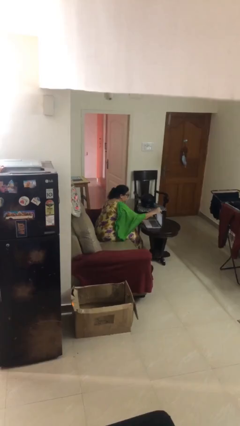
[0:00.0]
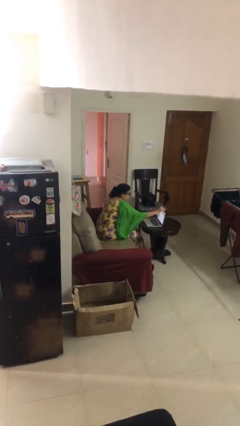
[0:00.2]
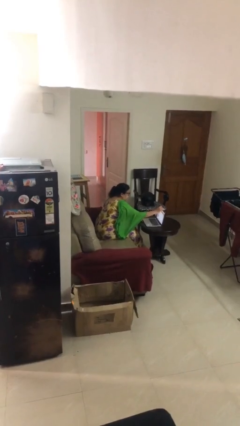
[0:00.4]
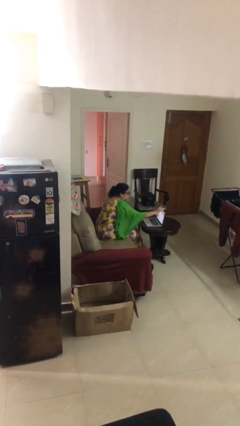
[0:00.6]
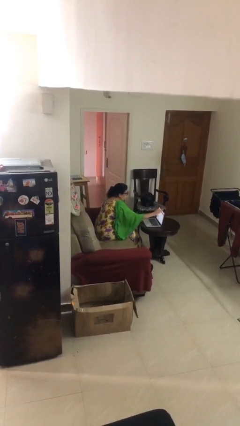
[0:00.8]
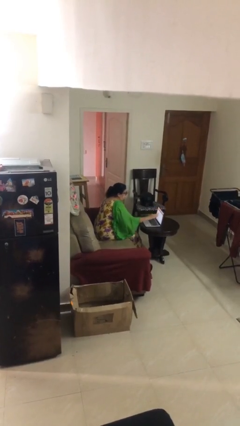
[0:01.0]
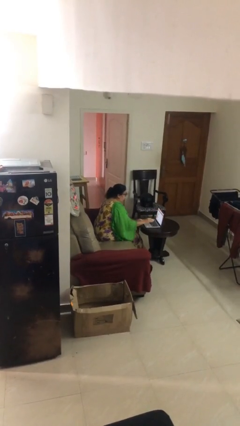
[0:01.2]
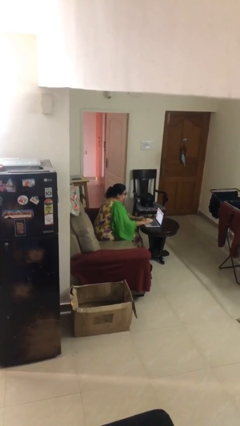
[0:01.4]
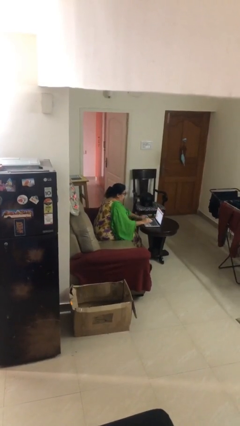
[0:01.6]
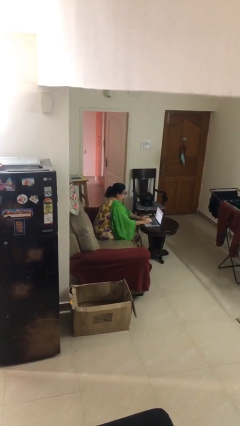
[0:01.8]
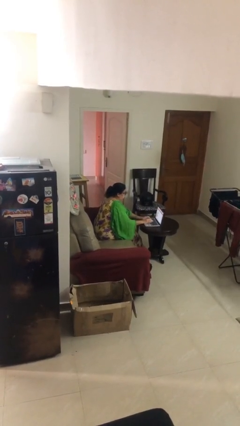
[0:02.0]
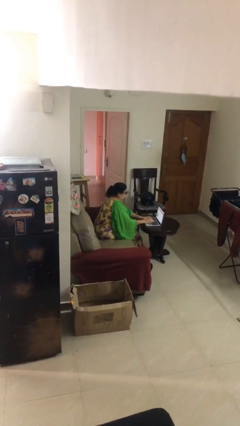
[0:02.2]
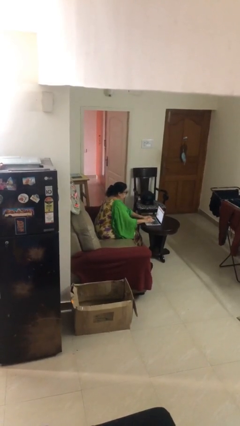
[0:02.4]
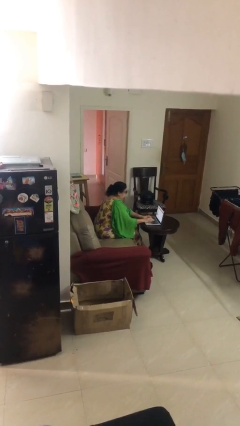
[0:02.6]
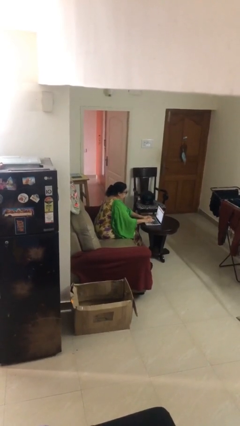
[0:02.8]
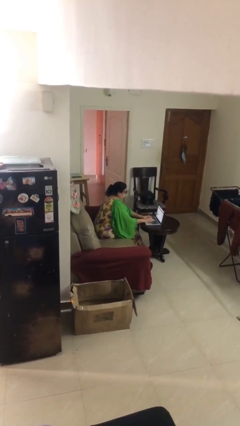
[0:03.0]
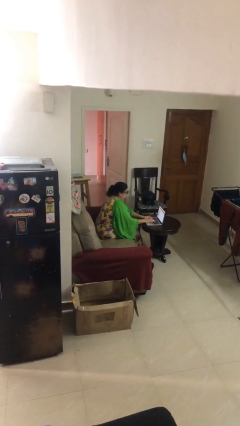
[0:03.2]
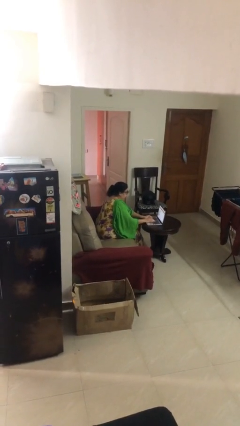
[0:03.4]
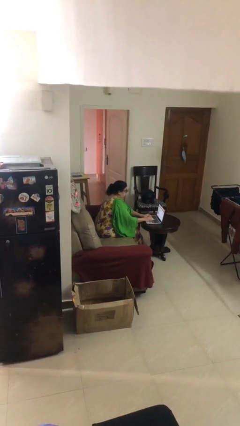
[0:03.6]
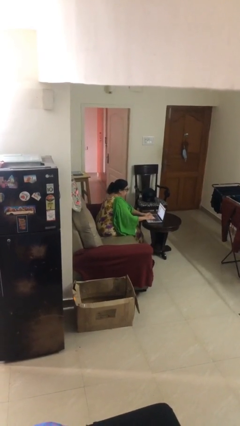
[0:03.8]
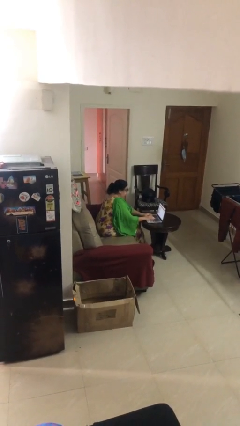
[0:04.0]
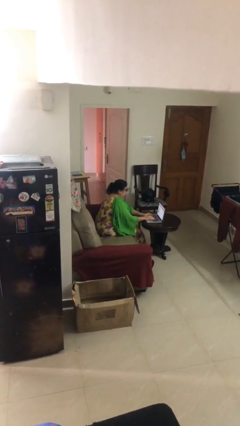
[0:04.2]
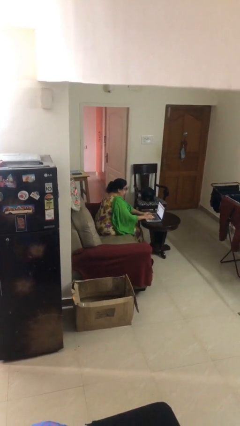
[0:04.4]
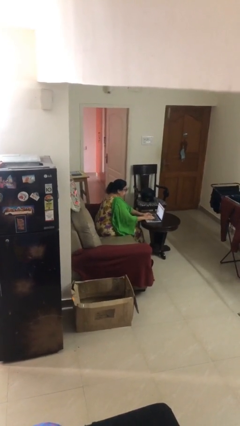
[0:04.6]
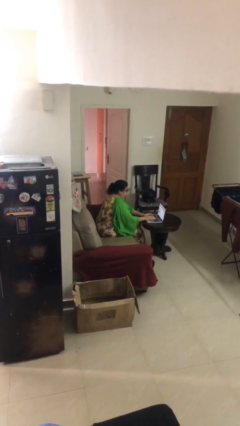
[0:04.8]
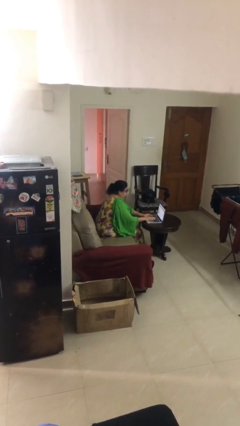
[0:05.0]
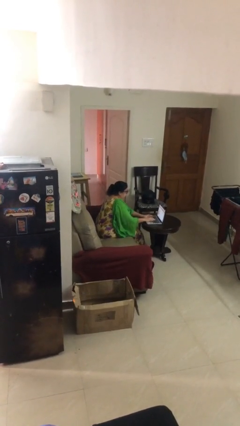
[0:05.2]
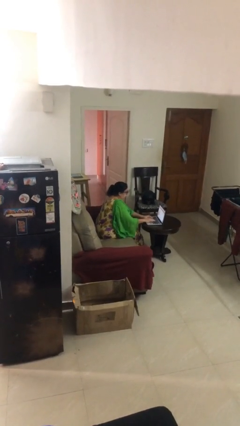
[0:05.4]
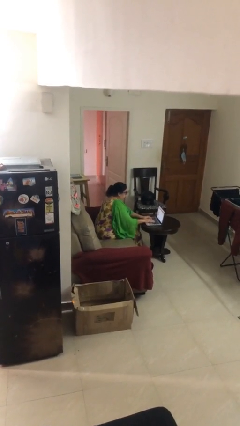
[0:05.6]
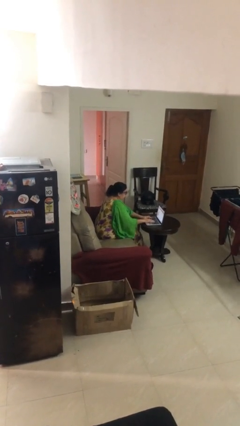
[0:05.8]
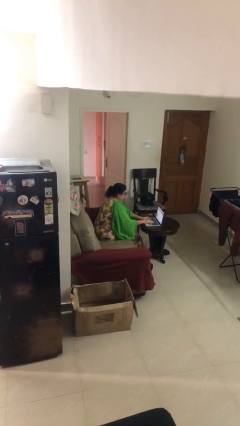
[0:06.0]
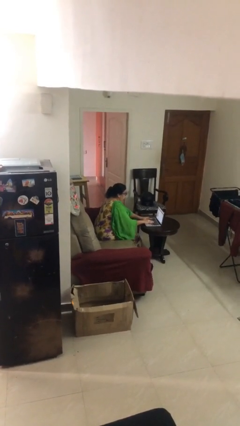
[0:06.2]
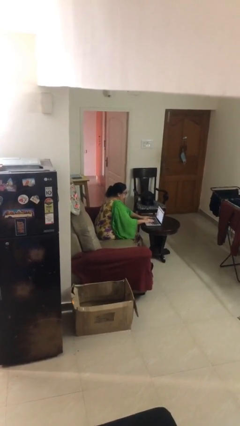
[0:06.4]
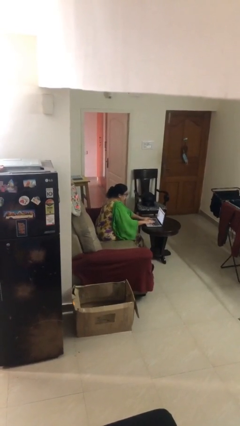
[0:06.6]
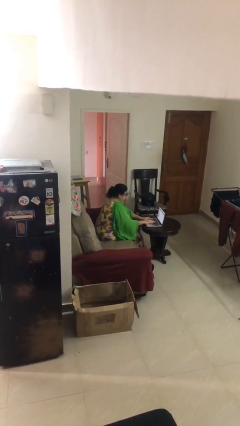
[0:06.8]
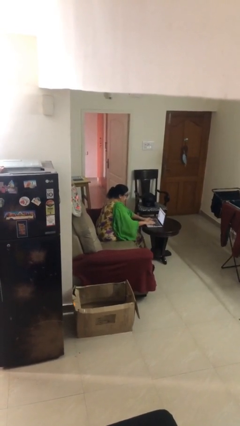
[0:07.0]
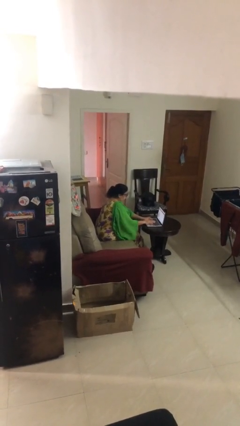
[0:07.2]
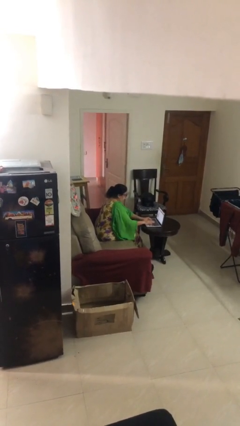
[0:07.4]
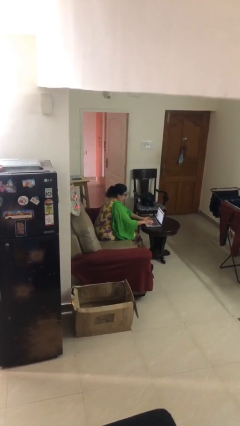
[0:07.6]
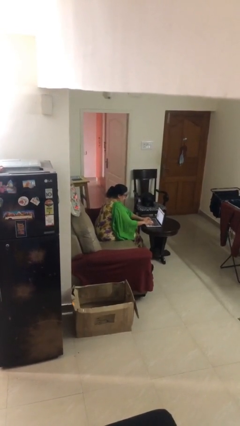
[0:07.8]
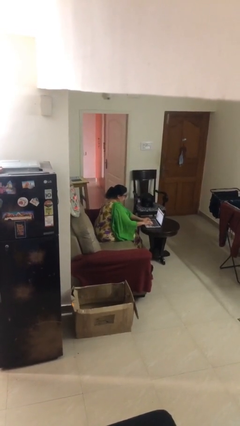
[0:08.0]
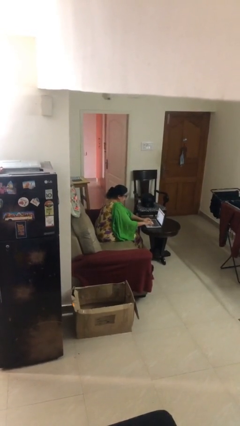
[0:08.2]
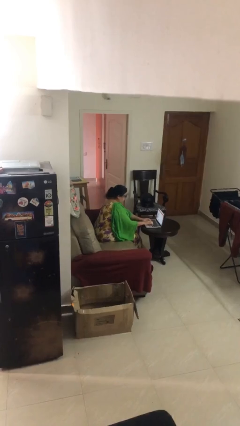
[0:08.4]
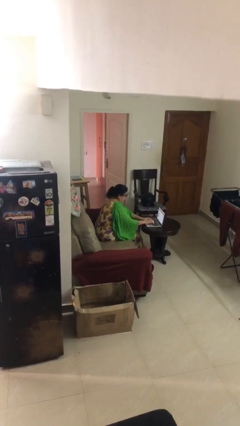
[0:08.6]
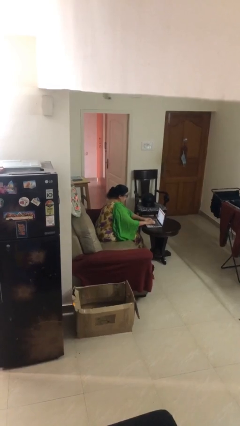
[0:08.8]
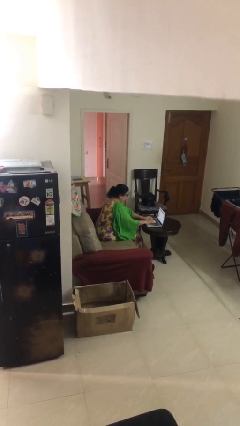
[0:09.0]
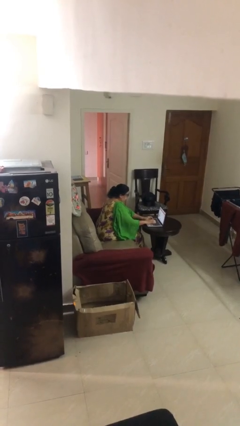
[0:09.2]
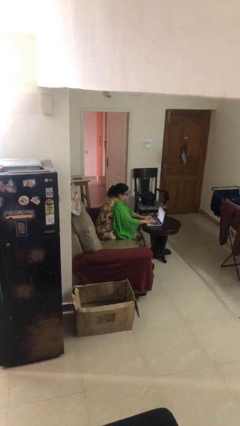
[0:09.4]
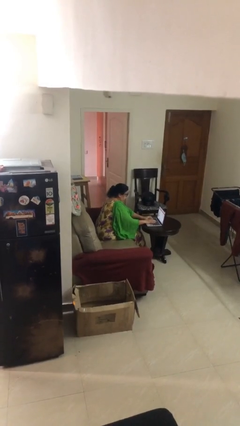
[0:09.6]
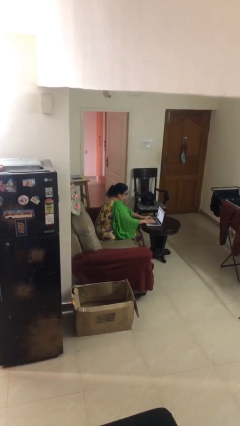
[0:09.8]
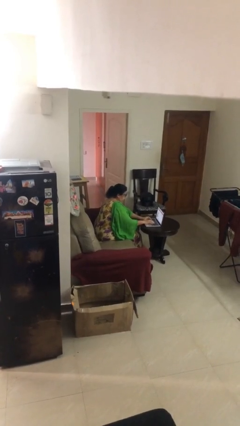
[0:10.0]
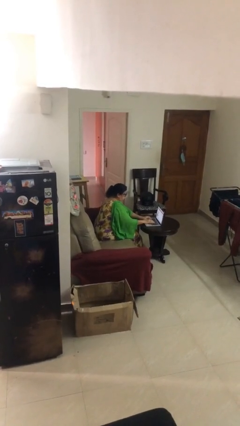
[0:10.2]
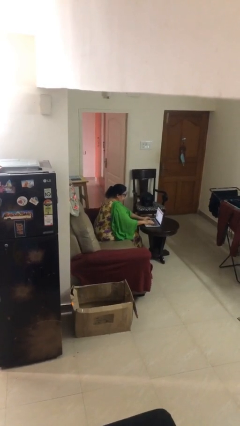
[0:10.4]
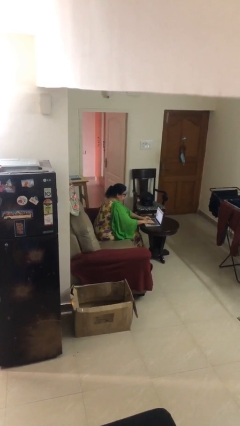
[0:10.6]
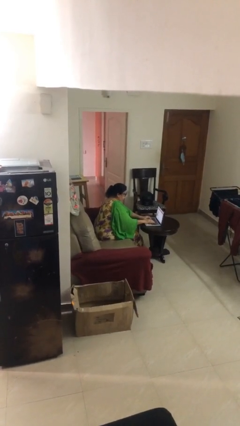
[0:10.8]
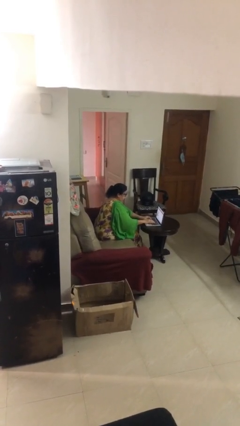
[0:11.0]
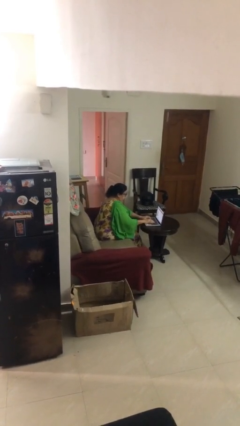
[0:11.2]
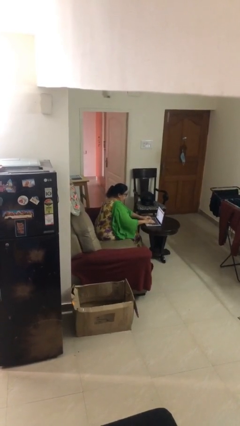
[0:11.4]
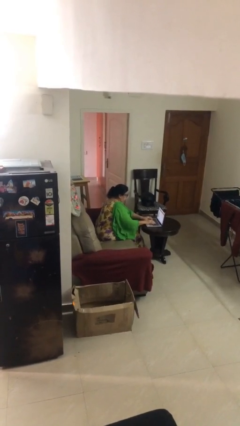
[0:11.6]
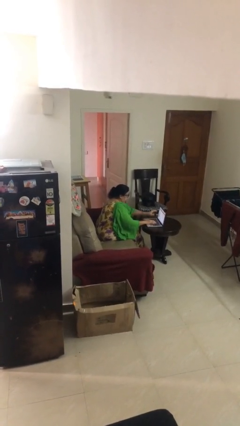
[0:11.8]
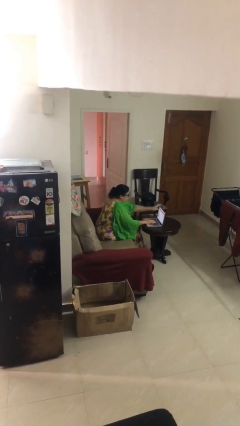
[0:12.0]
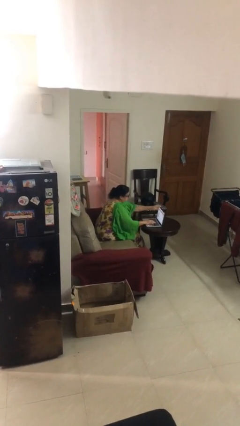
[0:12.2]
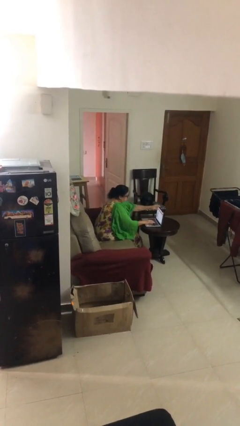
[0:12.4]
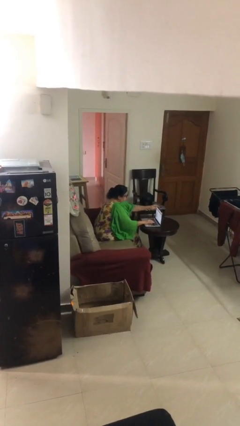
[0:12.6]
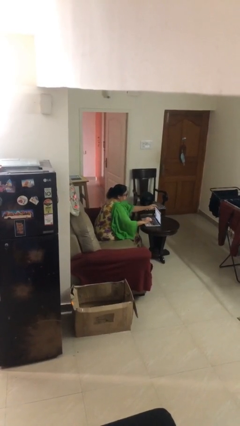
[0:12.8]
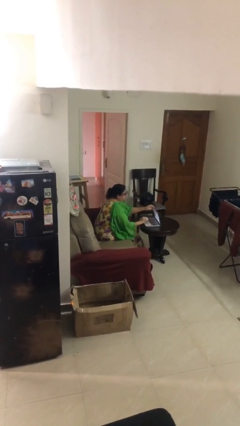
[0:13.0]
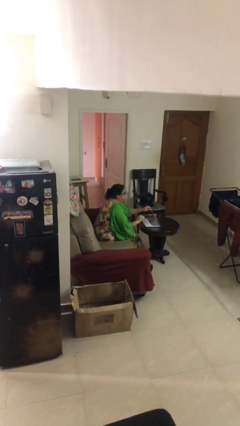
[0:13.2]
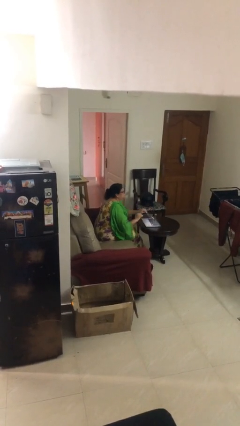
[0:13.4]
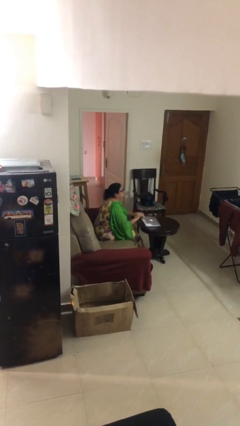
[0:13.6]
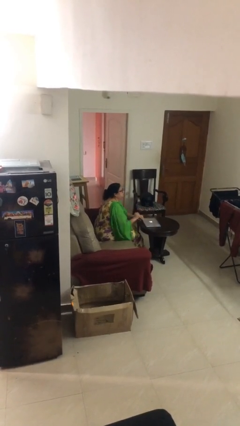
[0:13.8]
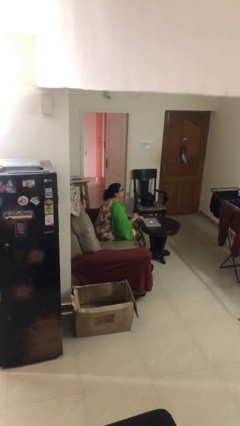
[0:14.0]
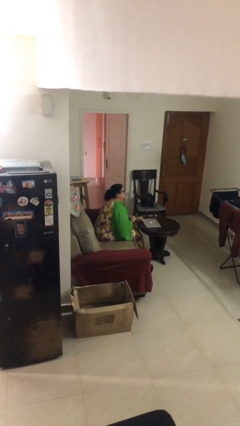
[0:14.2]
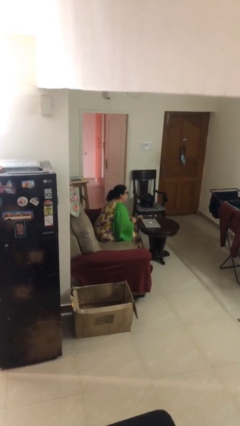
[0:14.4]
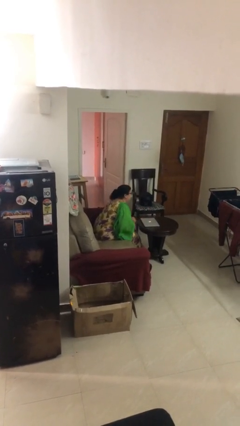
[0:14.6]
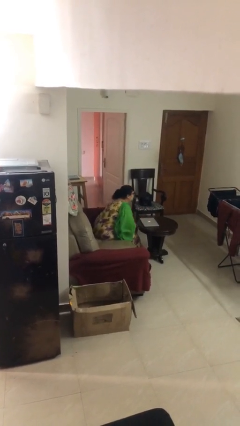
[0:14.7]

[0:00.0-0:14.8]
person interacts with laptop

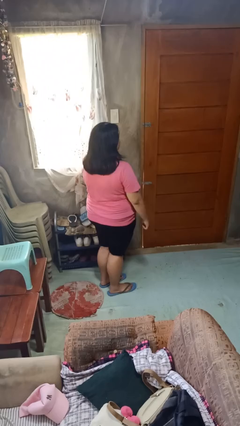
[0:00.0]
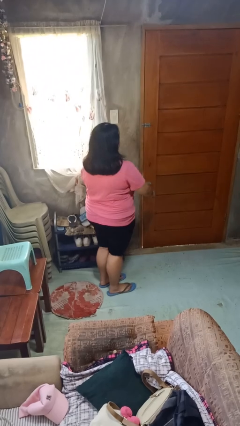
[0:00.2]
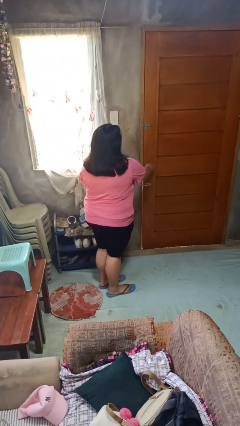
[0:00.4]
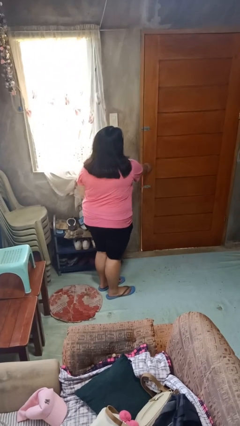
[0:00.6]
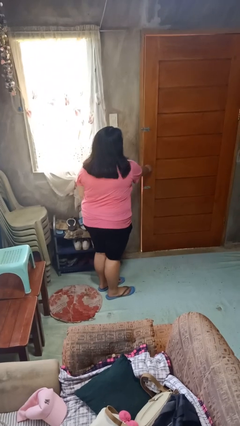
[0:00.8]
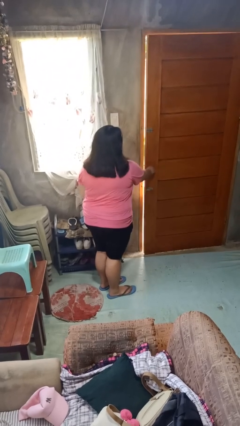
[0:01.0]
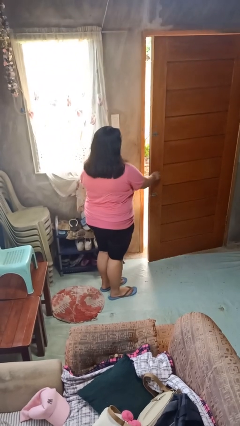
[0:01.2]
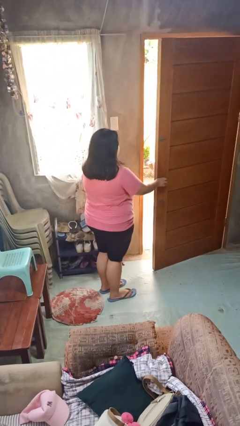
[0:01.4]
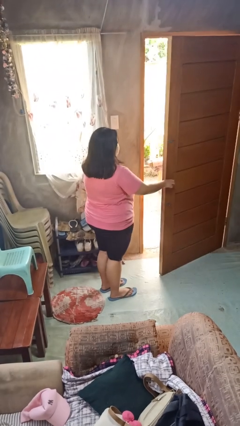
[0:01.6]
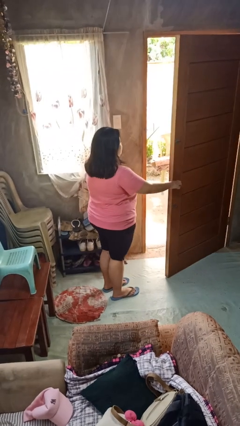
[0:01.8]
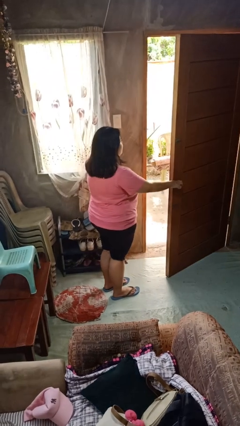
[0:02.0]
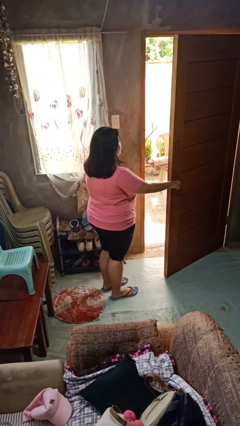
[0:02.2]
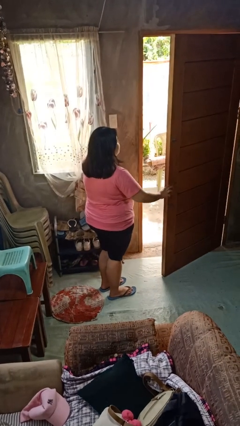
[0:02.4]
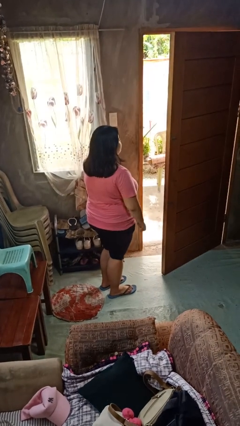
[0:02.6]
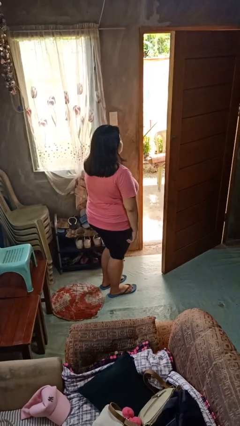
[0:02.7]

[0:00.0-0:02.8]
person opens facility door
